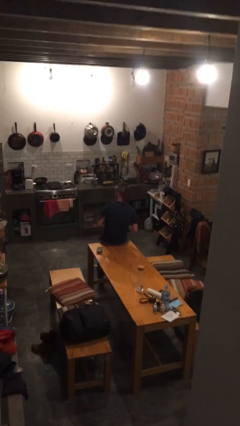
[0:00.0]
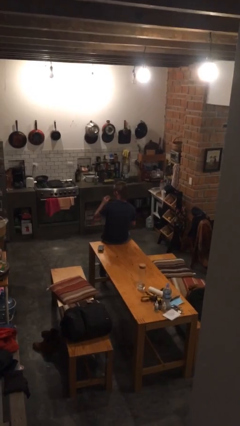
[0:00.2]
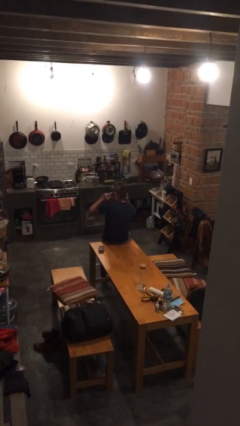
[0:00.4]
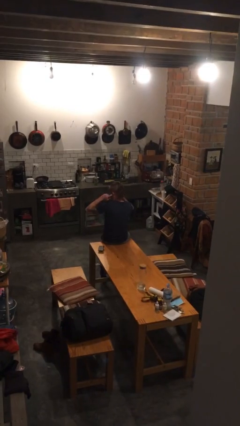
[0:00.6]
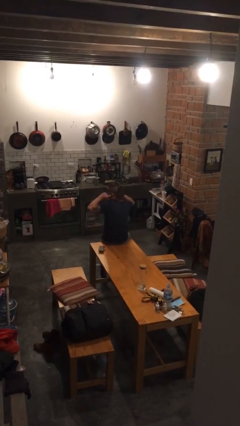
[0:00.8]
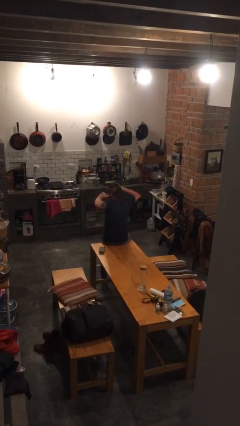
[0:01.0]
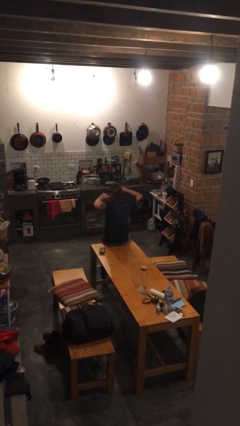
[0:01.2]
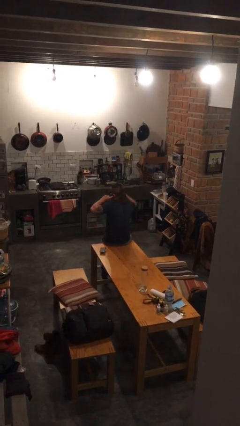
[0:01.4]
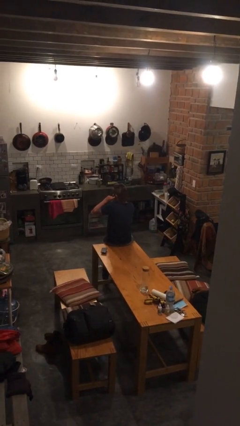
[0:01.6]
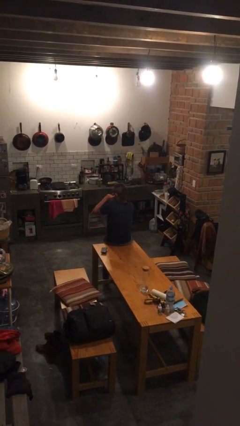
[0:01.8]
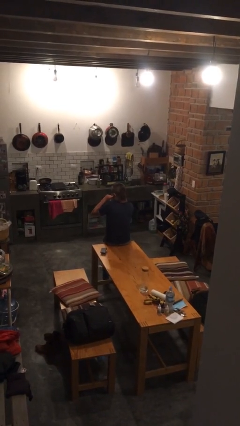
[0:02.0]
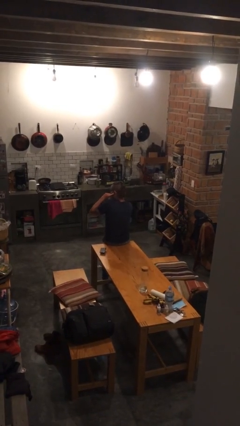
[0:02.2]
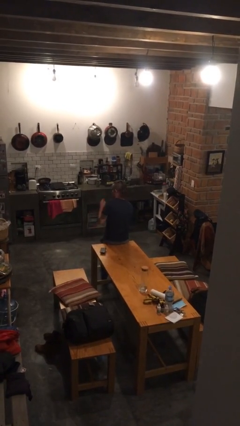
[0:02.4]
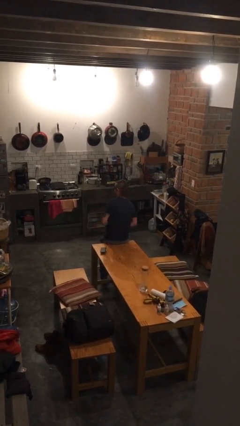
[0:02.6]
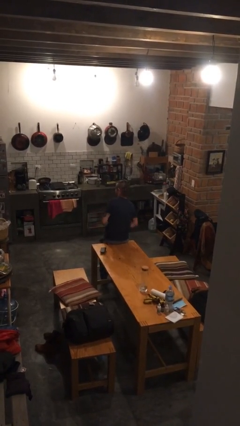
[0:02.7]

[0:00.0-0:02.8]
person puts fingers in ear

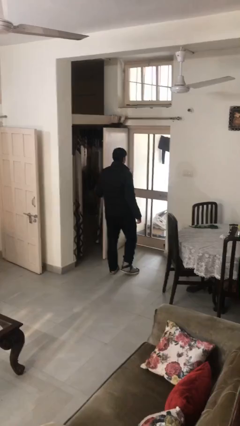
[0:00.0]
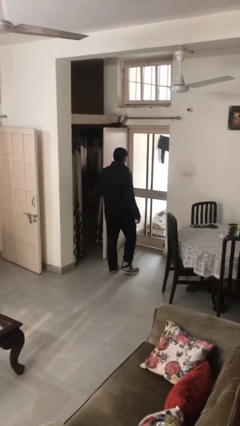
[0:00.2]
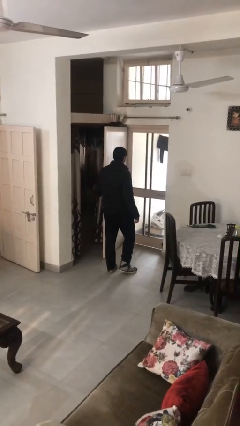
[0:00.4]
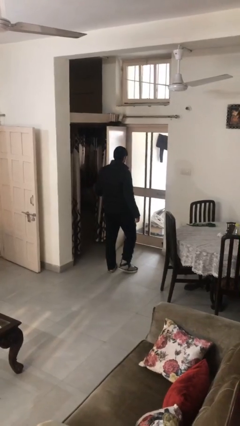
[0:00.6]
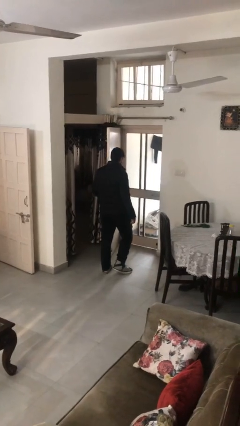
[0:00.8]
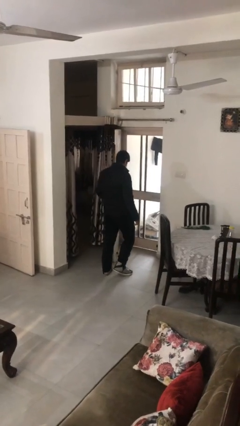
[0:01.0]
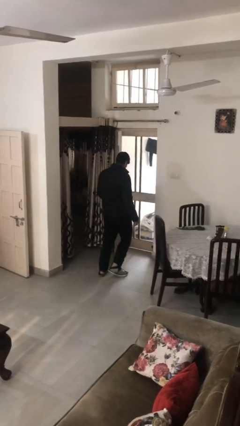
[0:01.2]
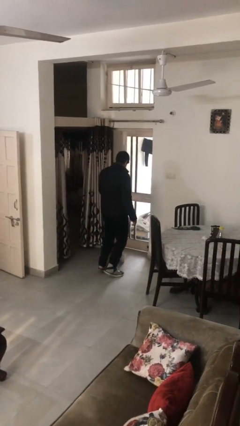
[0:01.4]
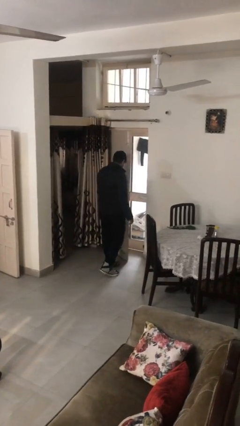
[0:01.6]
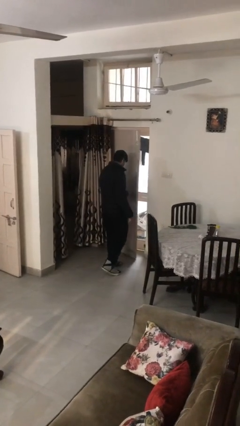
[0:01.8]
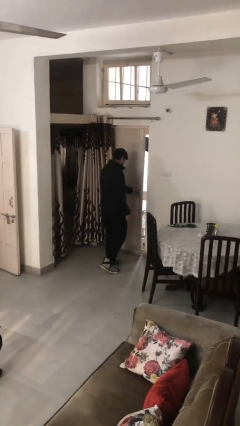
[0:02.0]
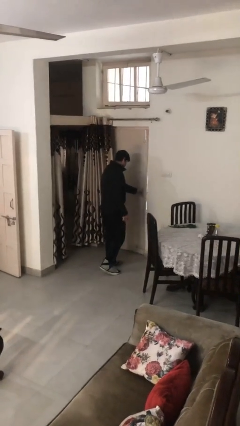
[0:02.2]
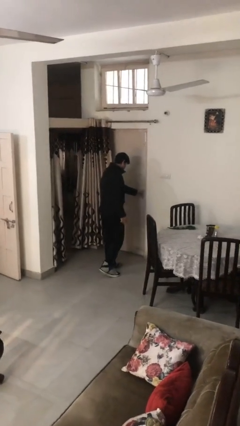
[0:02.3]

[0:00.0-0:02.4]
person closes facility door

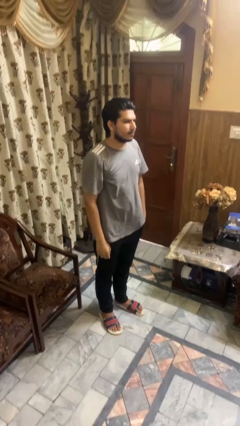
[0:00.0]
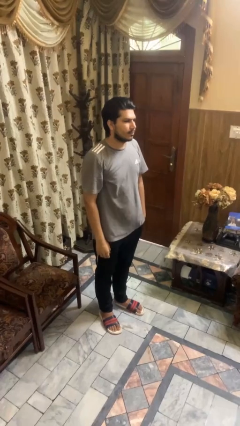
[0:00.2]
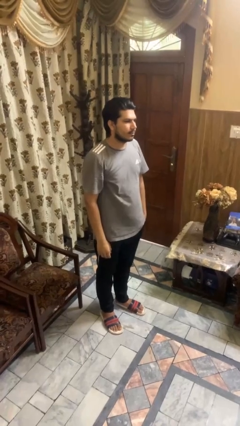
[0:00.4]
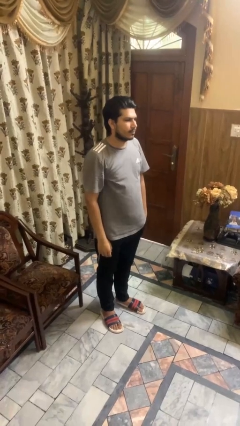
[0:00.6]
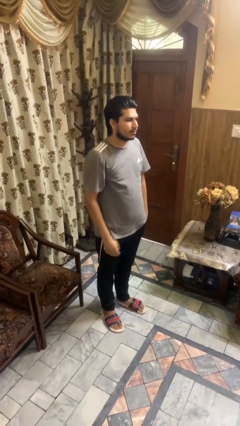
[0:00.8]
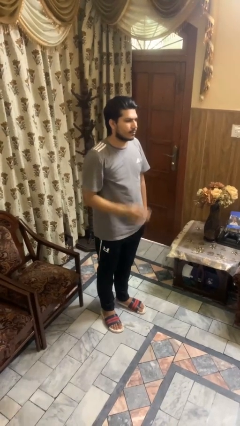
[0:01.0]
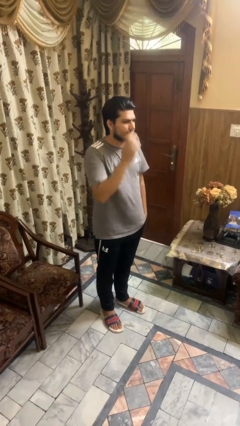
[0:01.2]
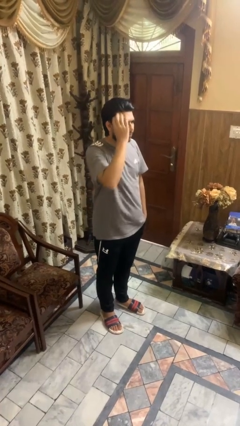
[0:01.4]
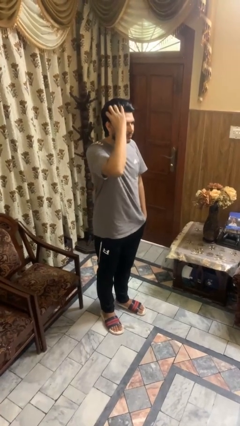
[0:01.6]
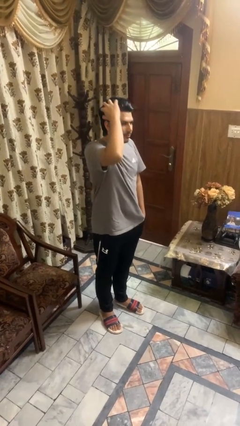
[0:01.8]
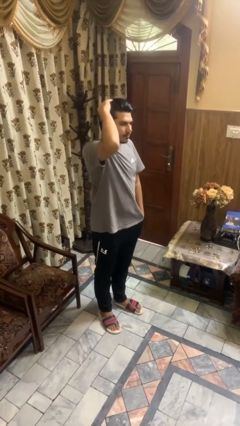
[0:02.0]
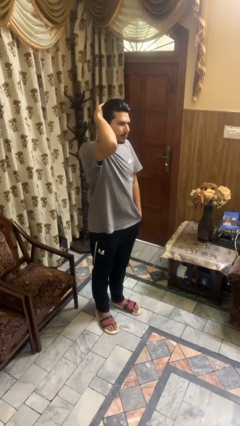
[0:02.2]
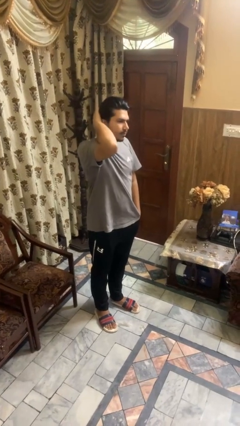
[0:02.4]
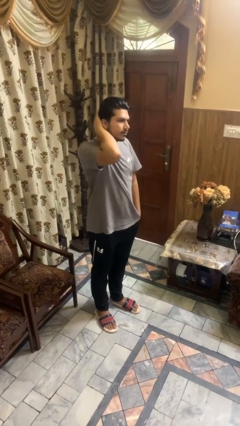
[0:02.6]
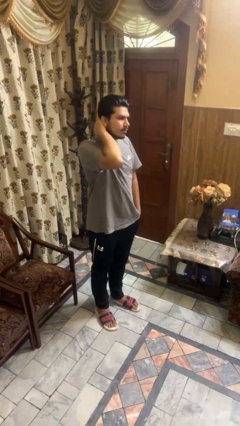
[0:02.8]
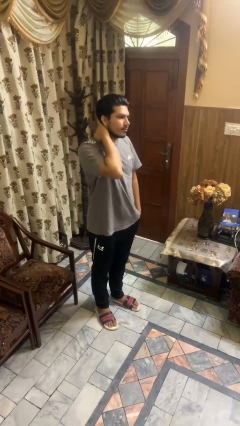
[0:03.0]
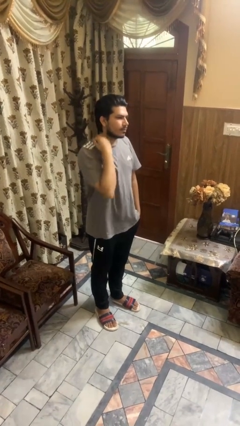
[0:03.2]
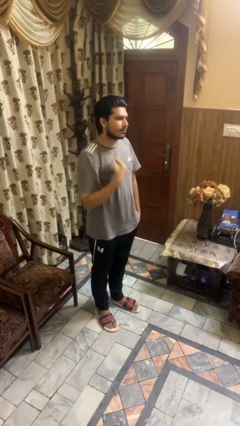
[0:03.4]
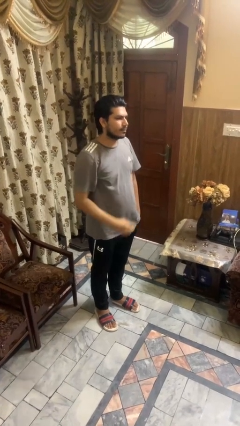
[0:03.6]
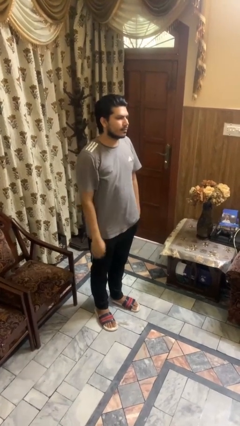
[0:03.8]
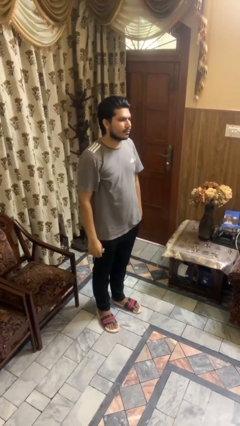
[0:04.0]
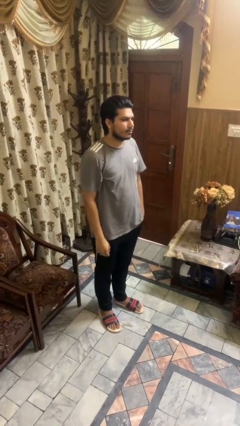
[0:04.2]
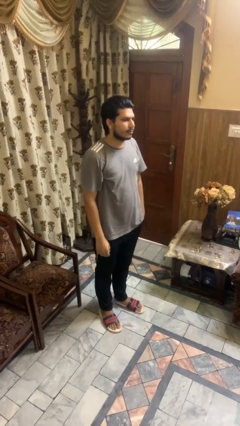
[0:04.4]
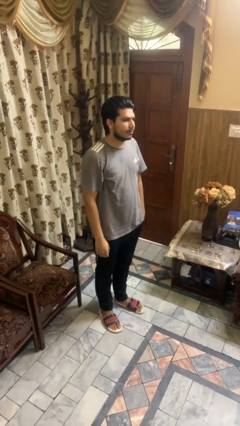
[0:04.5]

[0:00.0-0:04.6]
person strokes hair

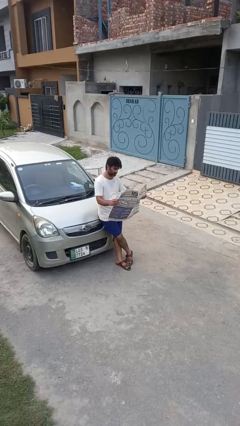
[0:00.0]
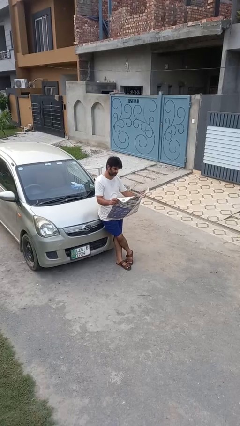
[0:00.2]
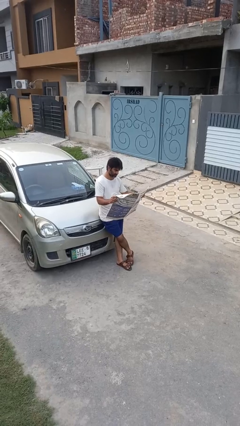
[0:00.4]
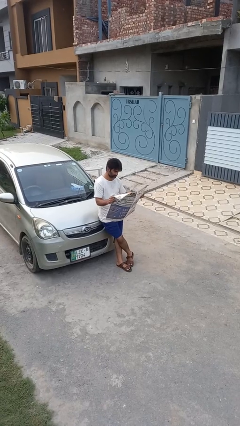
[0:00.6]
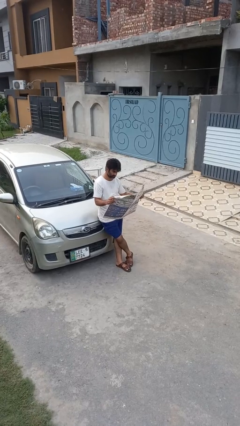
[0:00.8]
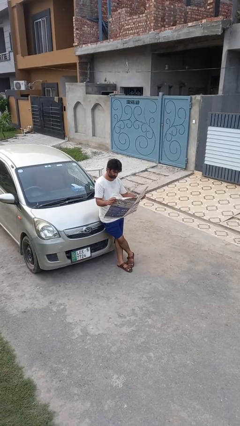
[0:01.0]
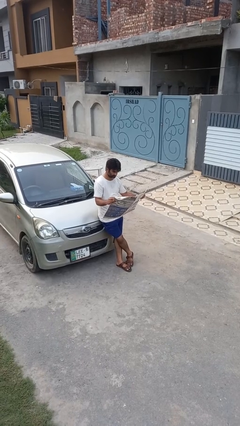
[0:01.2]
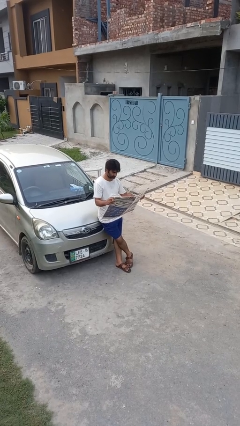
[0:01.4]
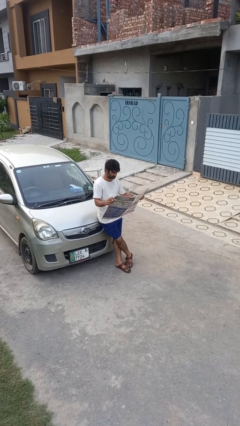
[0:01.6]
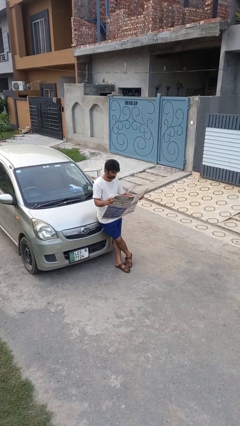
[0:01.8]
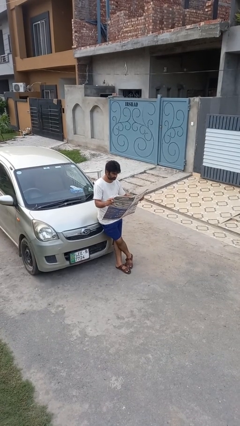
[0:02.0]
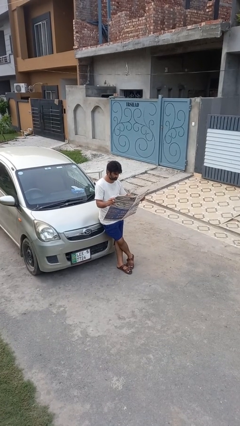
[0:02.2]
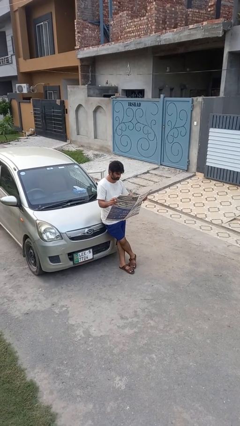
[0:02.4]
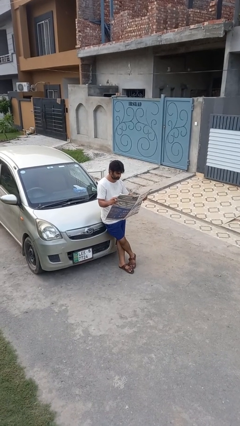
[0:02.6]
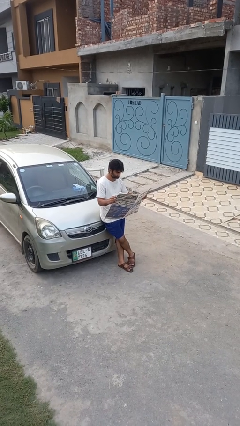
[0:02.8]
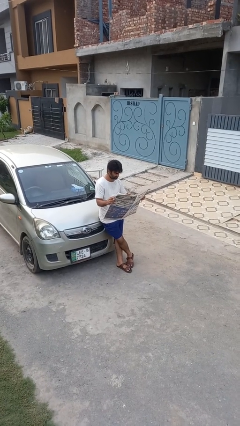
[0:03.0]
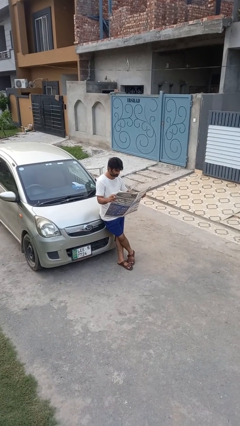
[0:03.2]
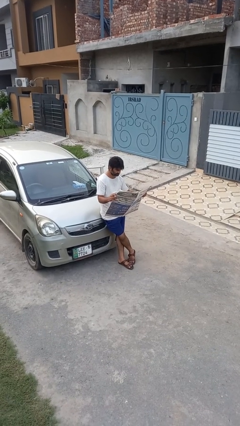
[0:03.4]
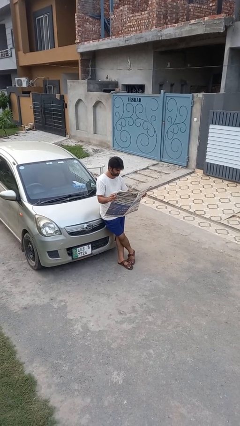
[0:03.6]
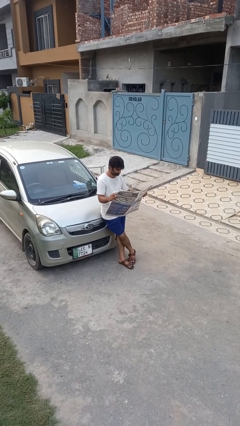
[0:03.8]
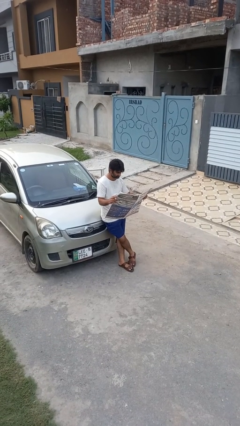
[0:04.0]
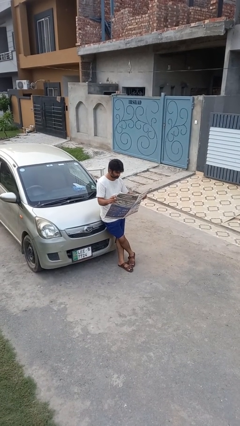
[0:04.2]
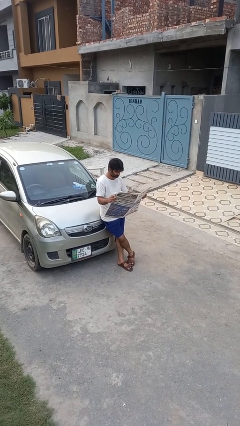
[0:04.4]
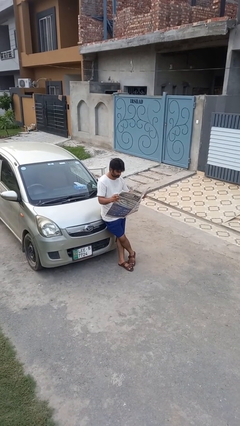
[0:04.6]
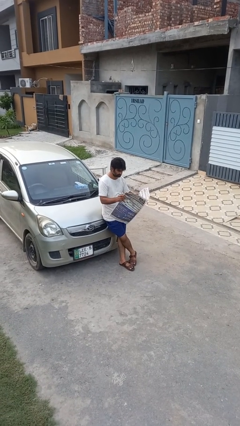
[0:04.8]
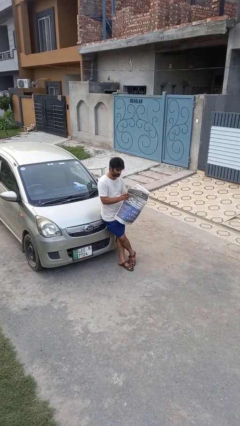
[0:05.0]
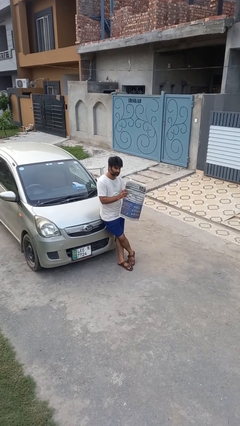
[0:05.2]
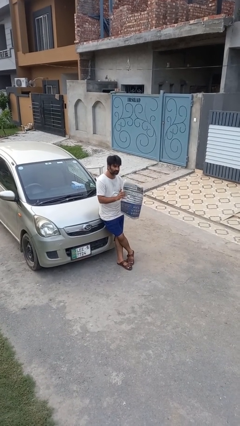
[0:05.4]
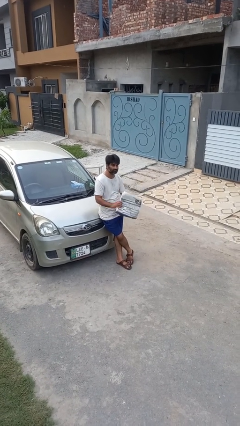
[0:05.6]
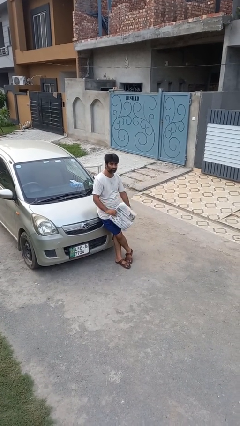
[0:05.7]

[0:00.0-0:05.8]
person reads newspaper

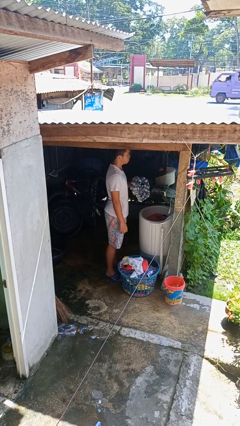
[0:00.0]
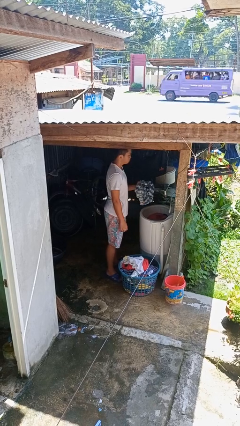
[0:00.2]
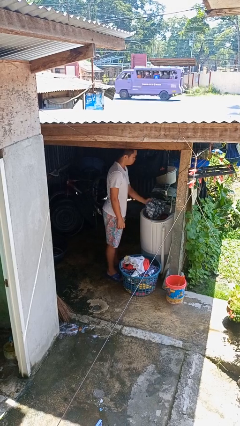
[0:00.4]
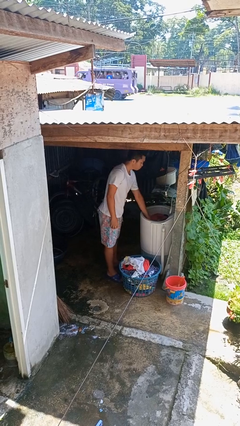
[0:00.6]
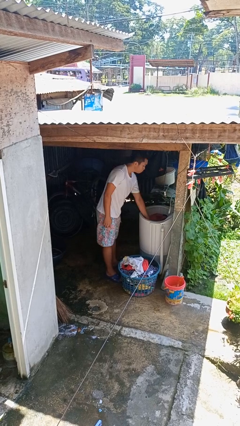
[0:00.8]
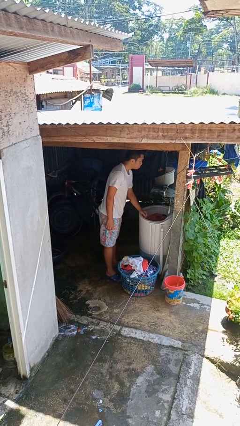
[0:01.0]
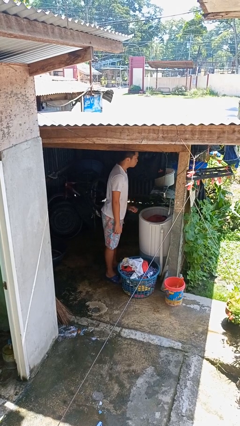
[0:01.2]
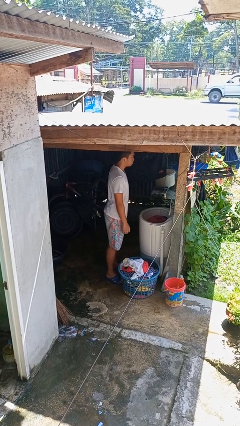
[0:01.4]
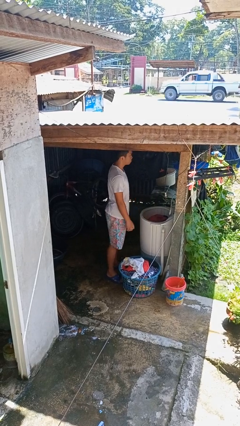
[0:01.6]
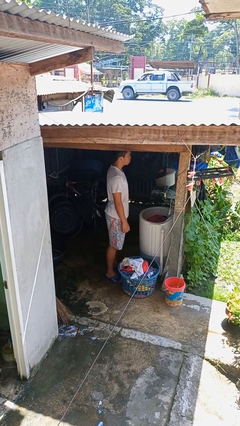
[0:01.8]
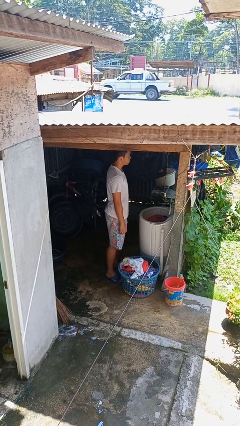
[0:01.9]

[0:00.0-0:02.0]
person loads clotheswasher
